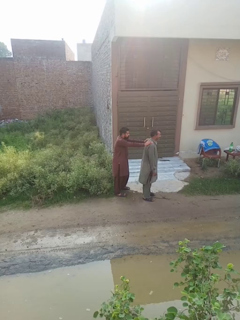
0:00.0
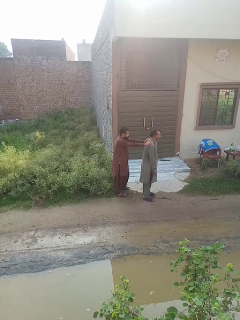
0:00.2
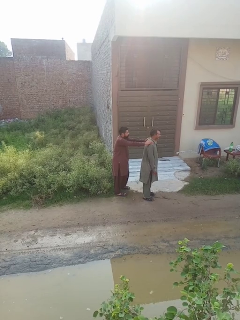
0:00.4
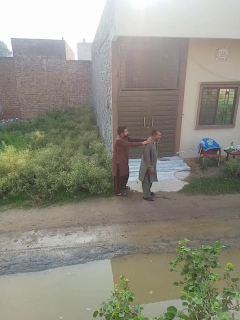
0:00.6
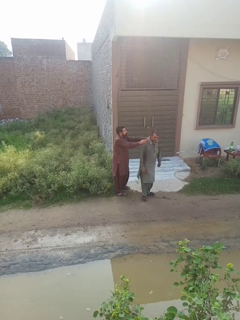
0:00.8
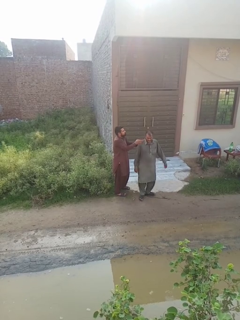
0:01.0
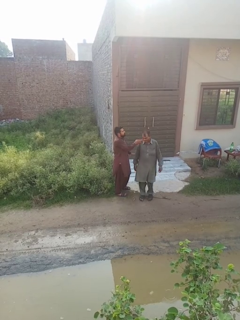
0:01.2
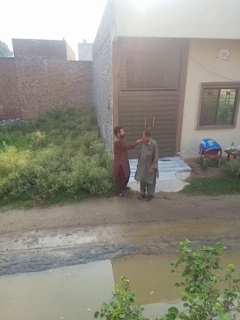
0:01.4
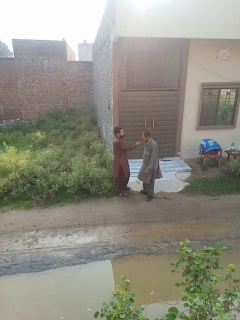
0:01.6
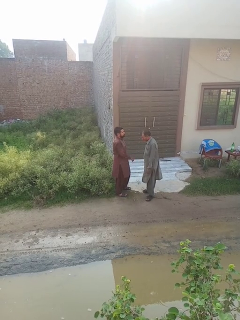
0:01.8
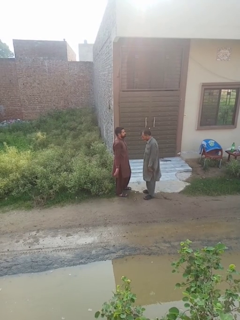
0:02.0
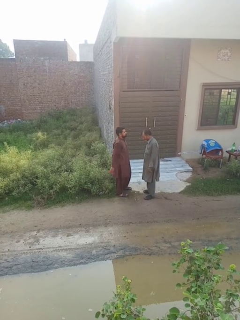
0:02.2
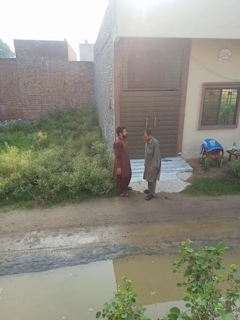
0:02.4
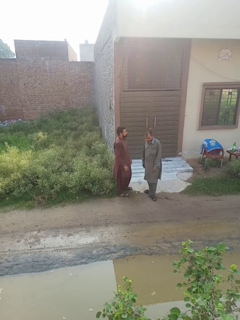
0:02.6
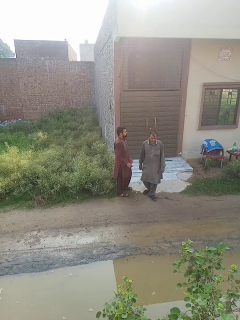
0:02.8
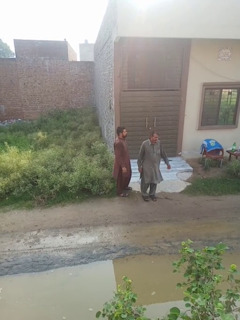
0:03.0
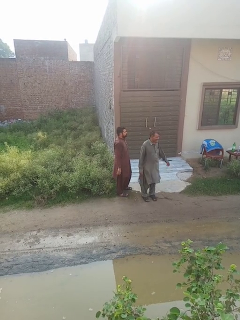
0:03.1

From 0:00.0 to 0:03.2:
person spins person around

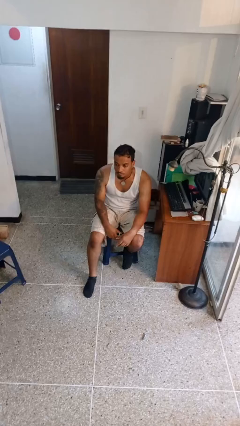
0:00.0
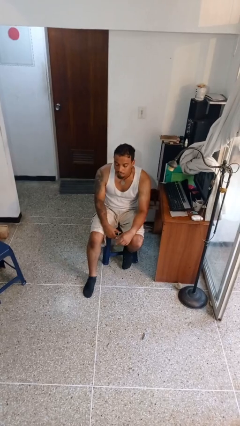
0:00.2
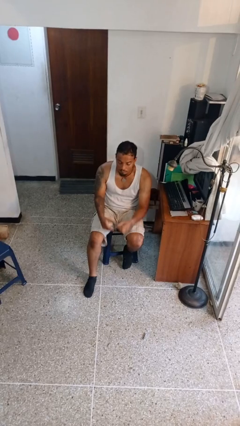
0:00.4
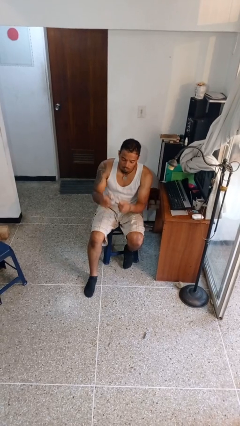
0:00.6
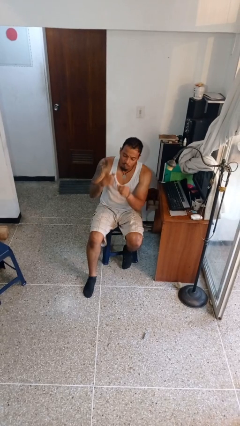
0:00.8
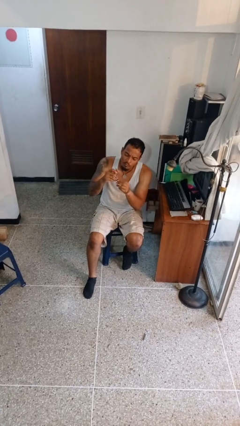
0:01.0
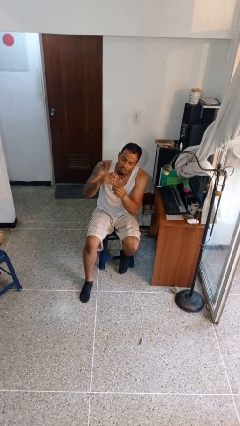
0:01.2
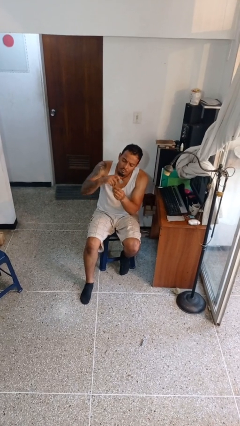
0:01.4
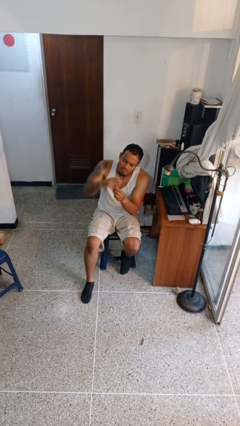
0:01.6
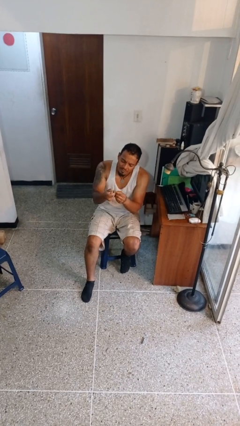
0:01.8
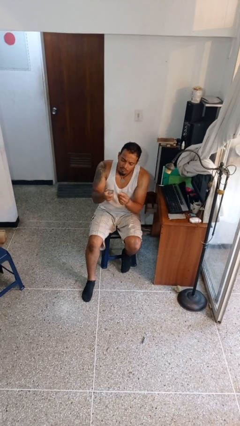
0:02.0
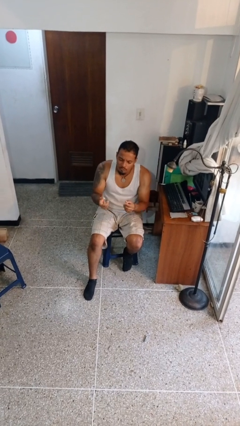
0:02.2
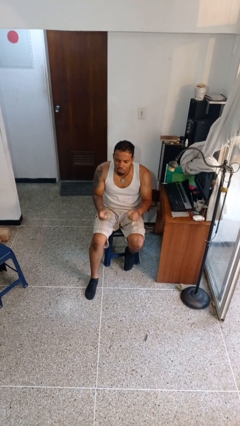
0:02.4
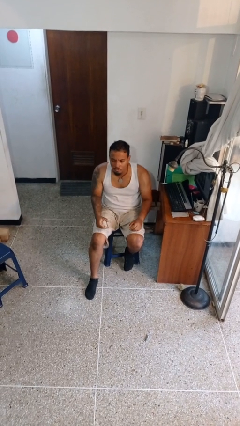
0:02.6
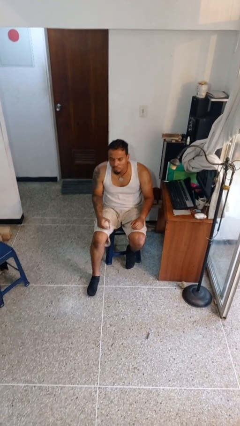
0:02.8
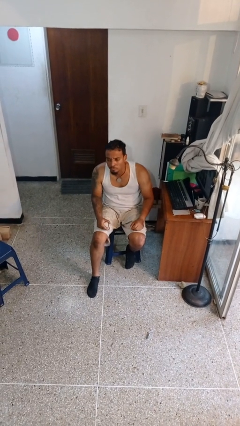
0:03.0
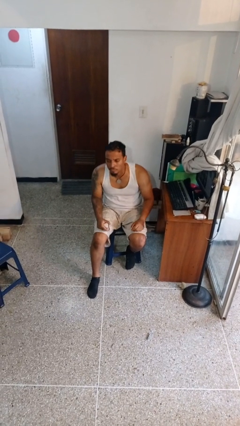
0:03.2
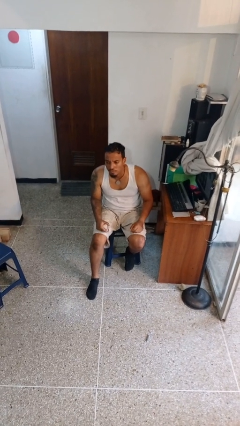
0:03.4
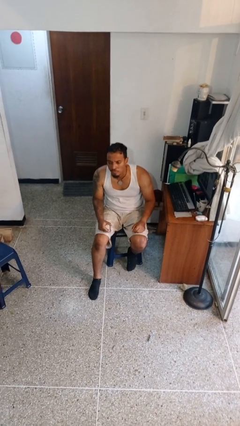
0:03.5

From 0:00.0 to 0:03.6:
person clips fingernails

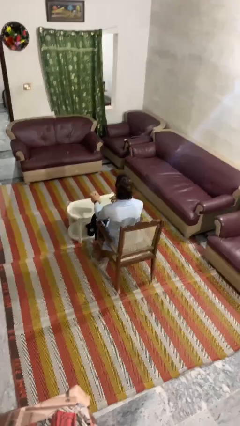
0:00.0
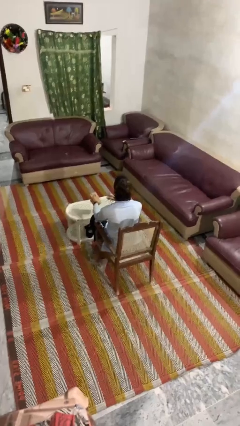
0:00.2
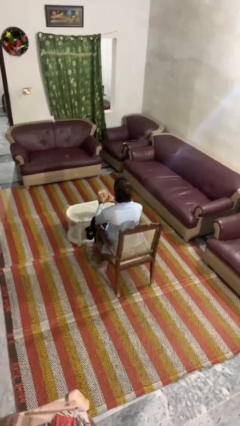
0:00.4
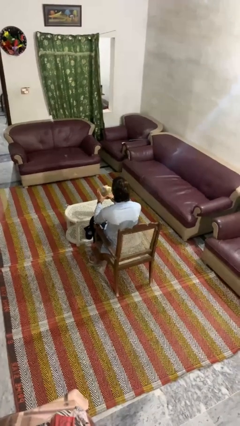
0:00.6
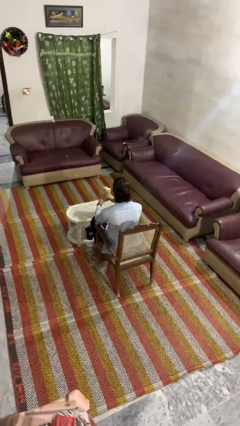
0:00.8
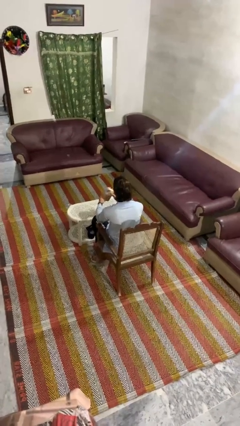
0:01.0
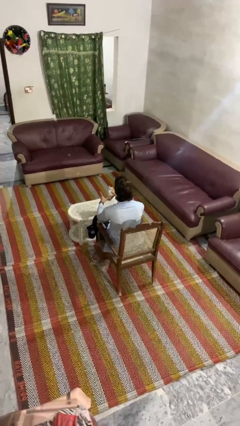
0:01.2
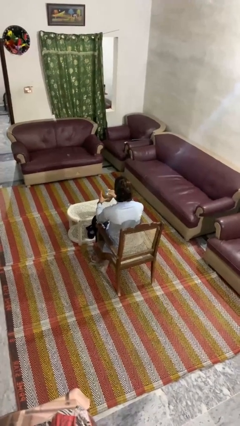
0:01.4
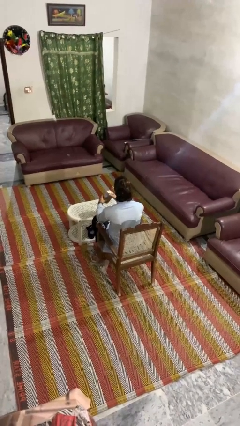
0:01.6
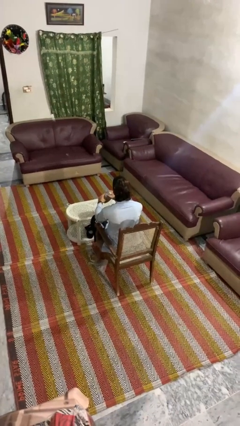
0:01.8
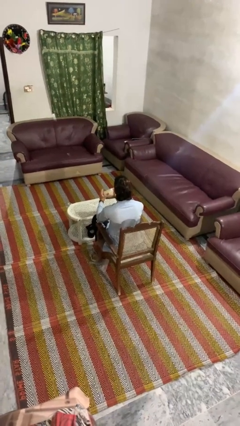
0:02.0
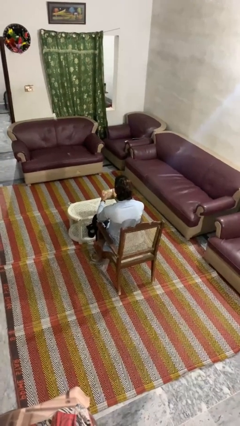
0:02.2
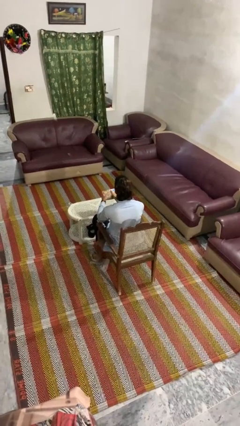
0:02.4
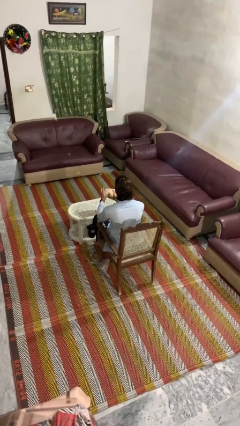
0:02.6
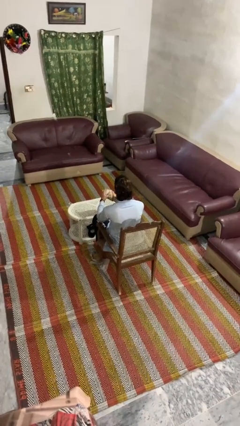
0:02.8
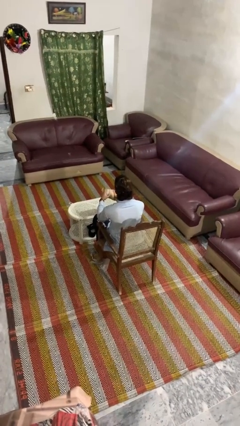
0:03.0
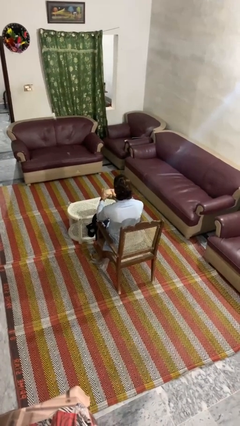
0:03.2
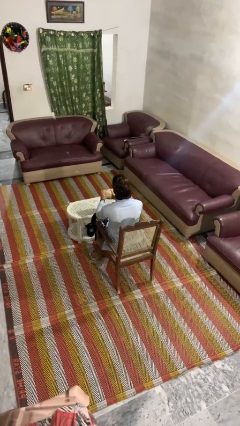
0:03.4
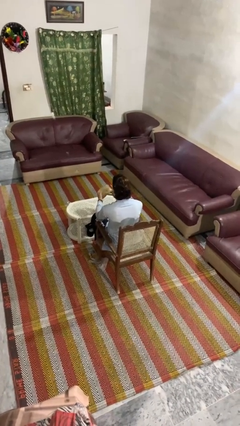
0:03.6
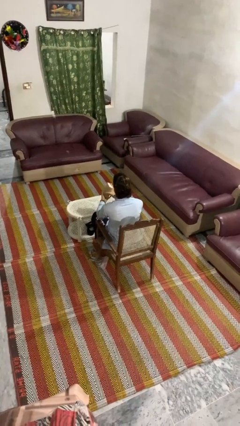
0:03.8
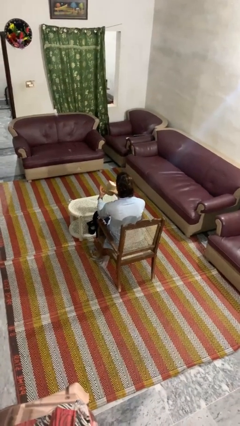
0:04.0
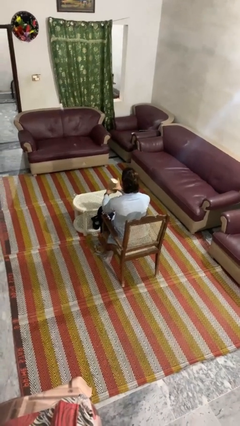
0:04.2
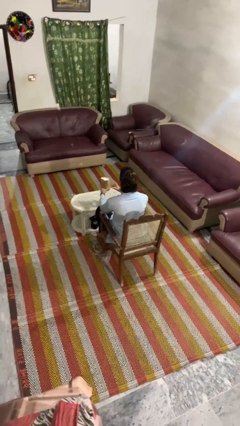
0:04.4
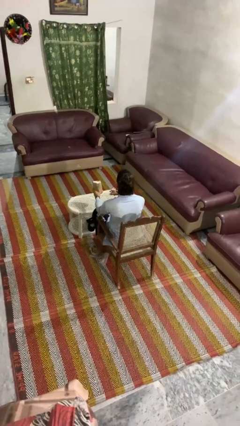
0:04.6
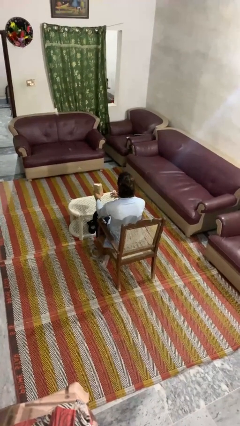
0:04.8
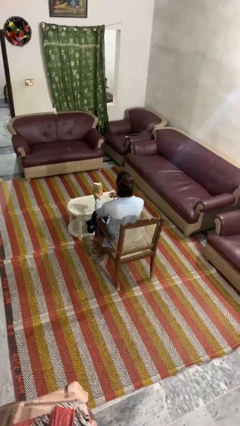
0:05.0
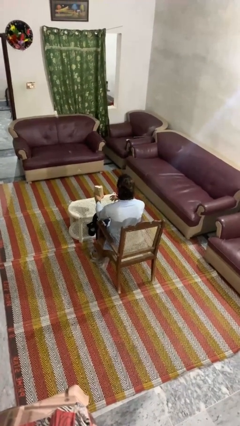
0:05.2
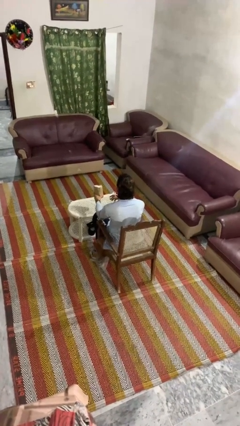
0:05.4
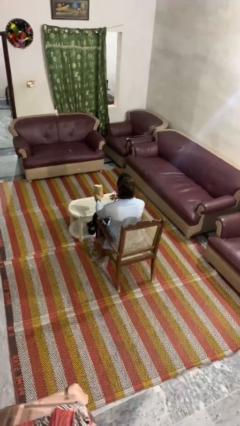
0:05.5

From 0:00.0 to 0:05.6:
person squeezes object

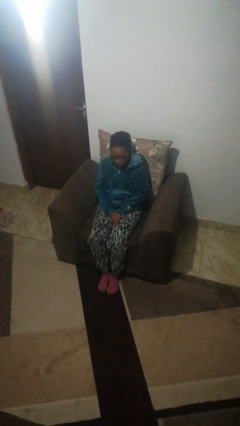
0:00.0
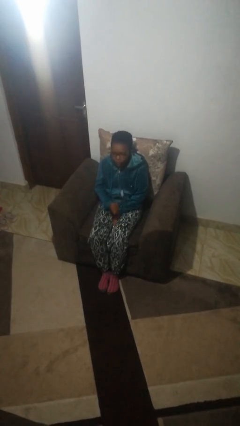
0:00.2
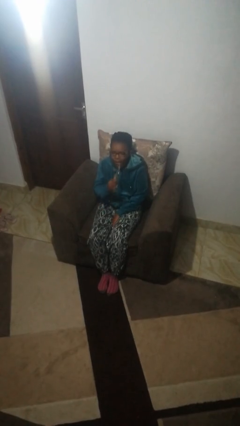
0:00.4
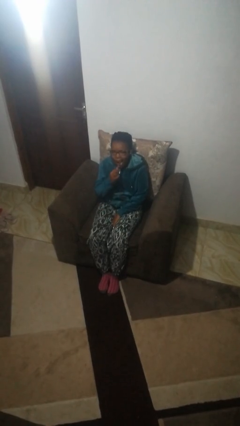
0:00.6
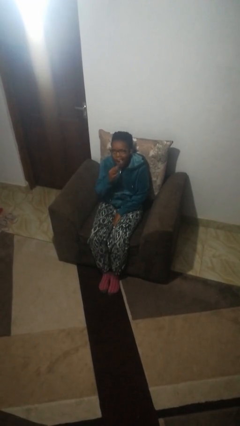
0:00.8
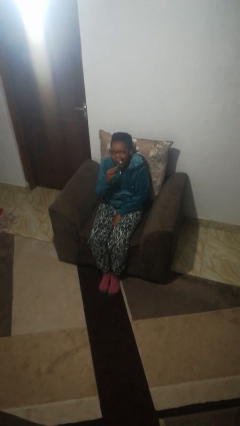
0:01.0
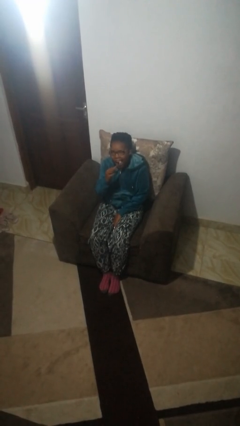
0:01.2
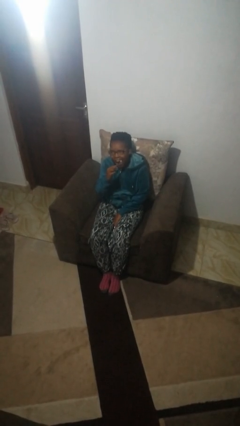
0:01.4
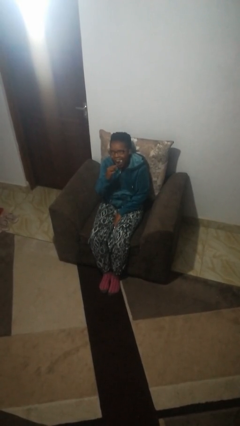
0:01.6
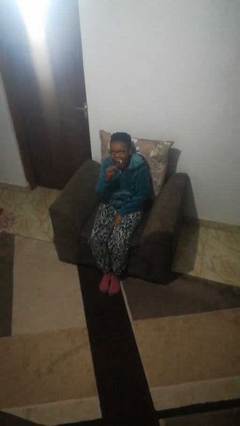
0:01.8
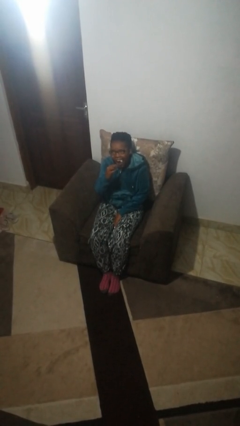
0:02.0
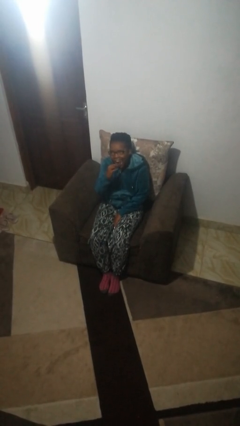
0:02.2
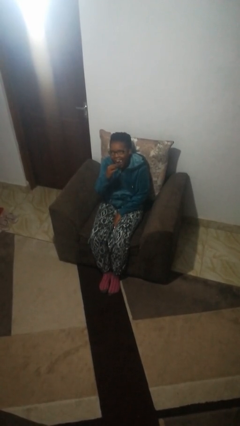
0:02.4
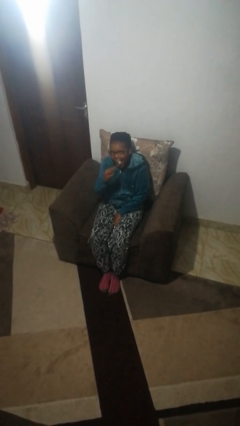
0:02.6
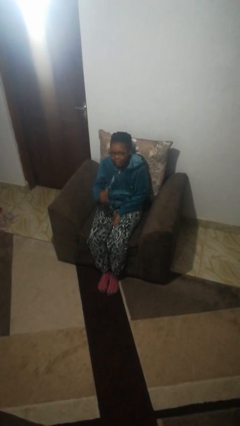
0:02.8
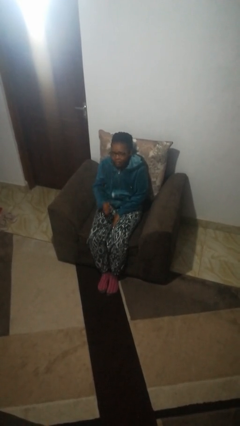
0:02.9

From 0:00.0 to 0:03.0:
person brushes teeth

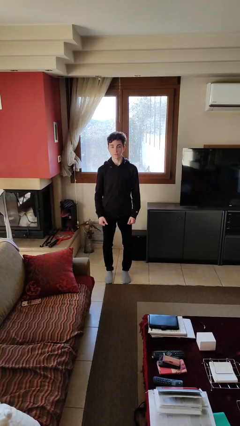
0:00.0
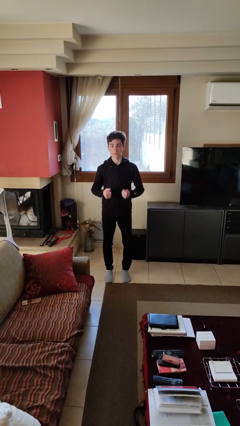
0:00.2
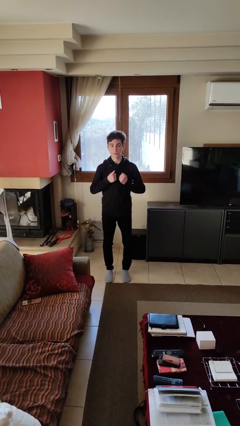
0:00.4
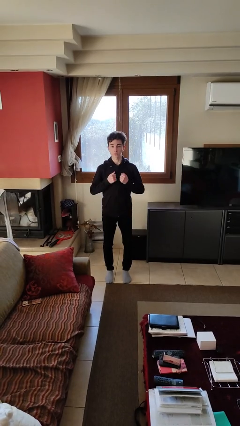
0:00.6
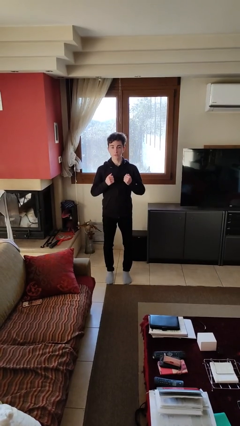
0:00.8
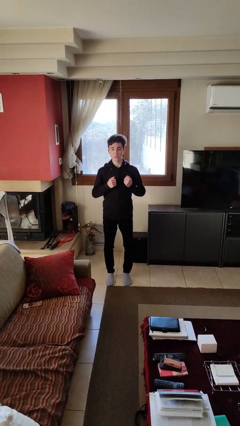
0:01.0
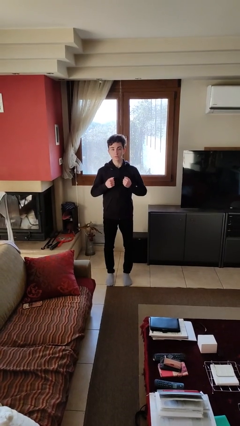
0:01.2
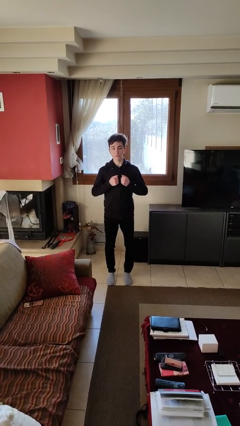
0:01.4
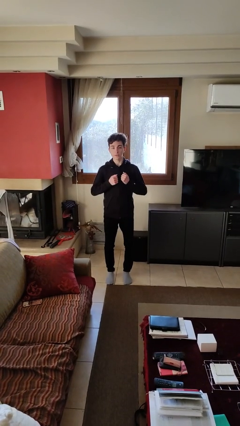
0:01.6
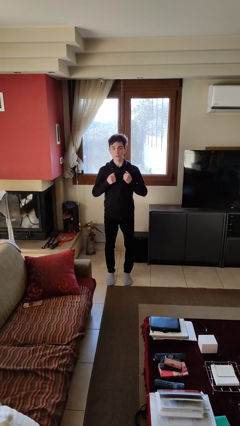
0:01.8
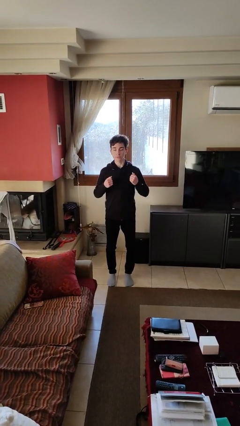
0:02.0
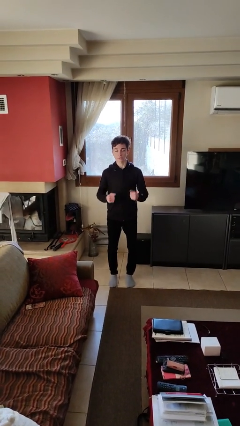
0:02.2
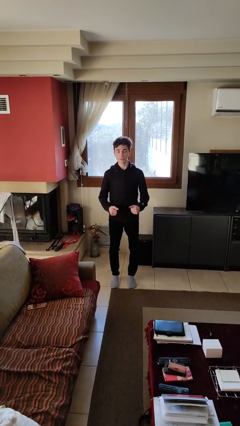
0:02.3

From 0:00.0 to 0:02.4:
person drums on chest

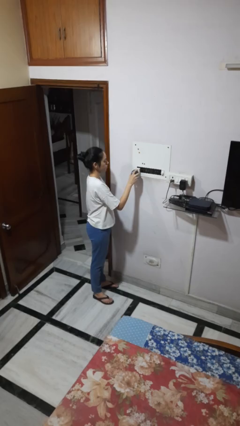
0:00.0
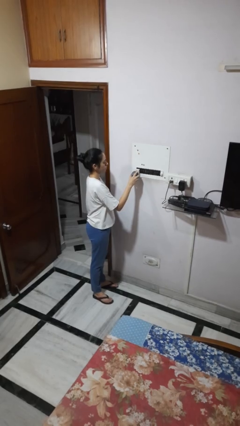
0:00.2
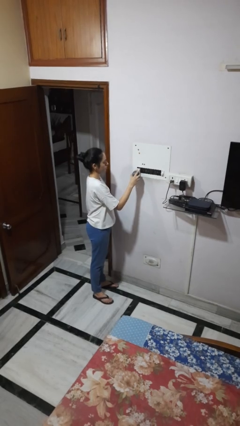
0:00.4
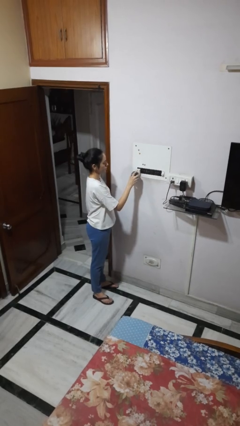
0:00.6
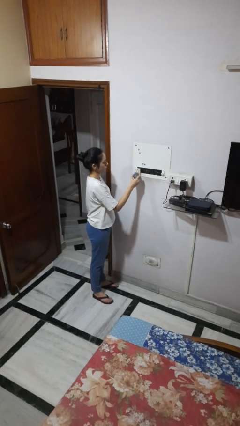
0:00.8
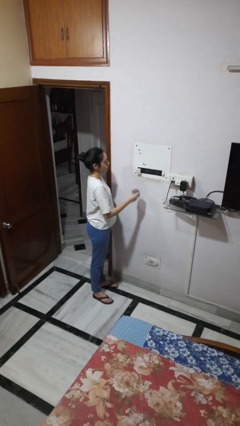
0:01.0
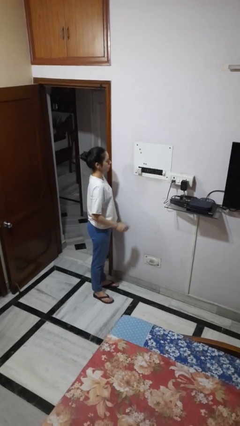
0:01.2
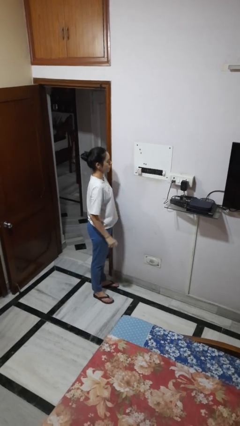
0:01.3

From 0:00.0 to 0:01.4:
person unplugs from electrical socket
